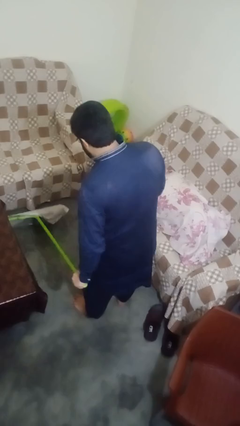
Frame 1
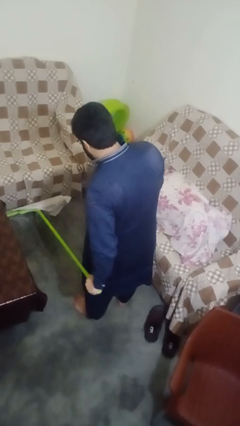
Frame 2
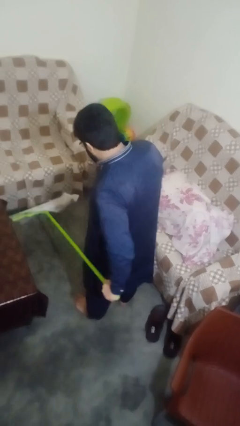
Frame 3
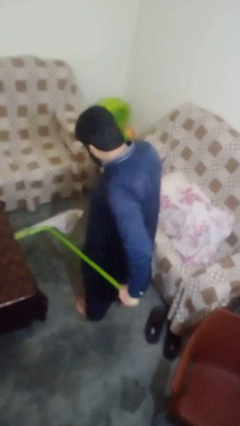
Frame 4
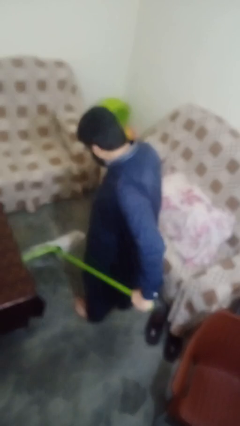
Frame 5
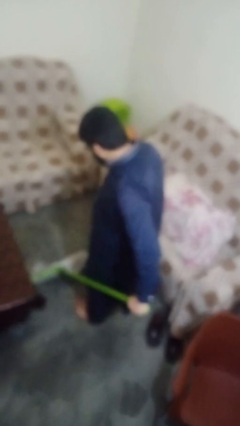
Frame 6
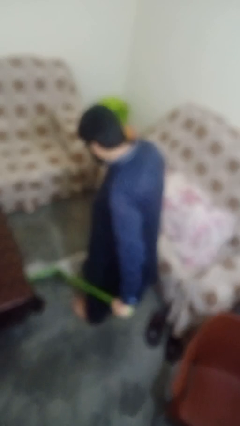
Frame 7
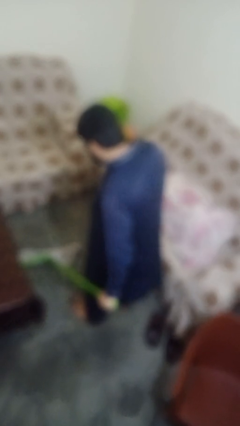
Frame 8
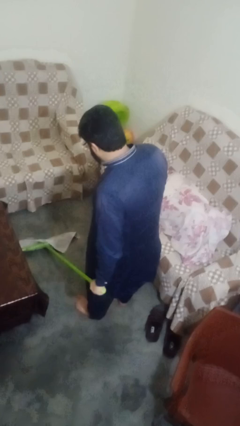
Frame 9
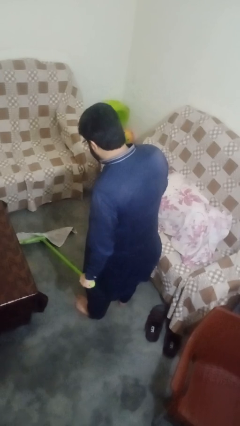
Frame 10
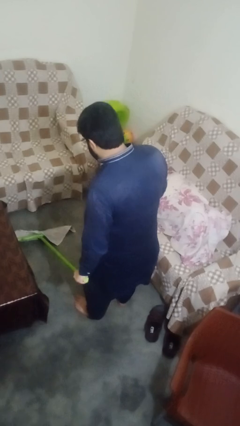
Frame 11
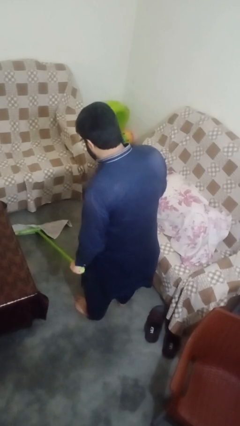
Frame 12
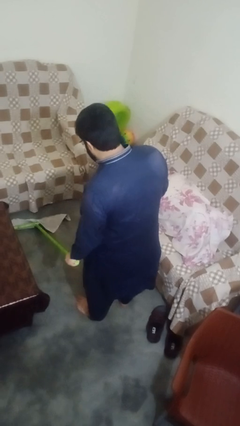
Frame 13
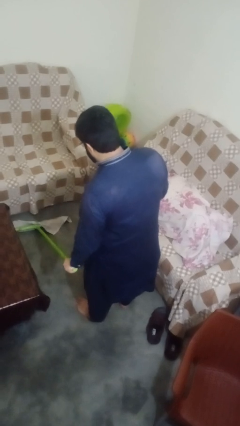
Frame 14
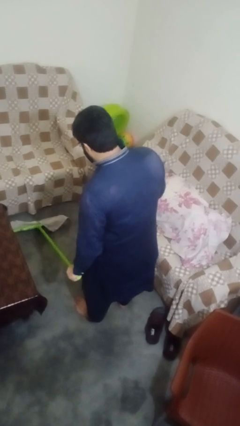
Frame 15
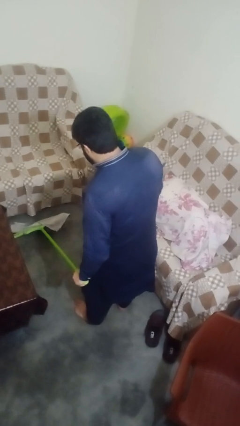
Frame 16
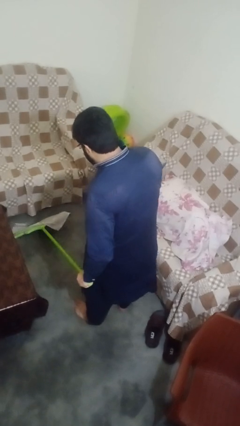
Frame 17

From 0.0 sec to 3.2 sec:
person mops

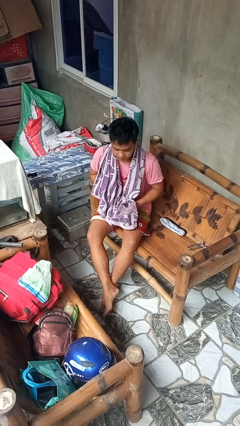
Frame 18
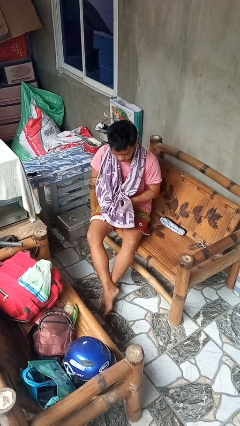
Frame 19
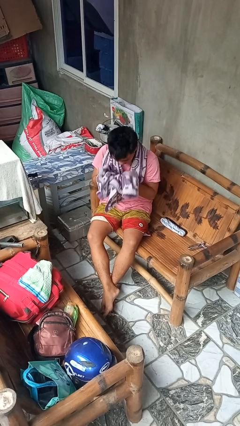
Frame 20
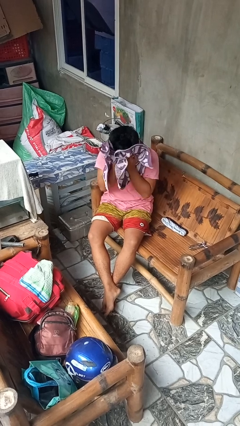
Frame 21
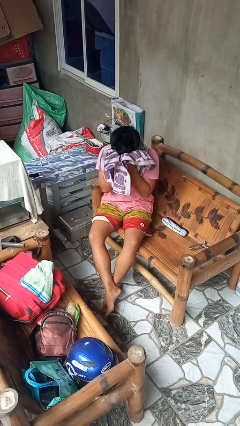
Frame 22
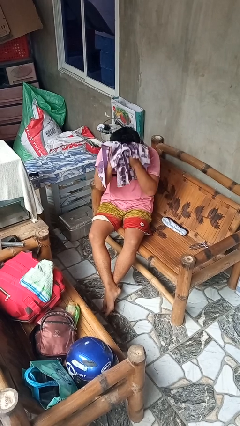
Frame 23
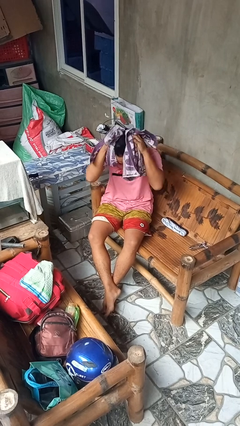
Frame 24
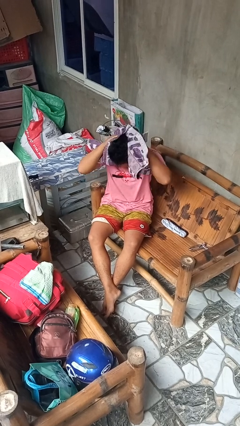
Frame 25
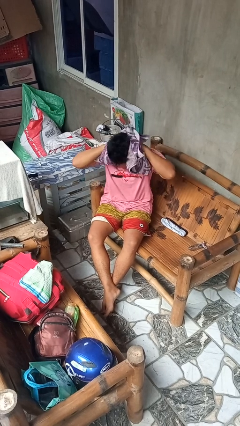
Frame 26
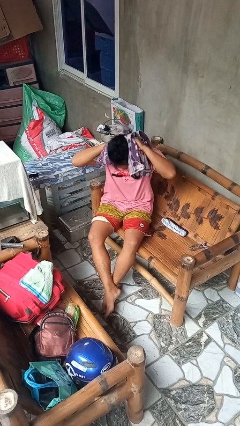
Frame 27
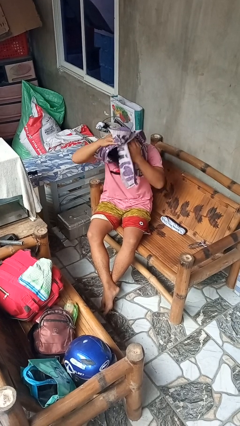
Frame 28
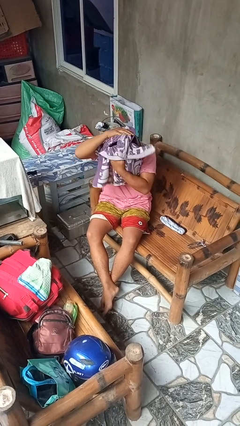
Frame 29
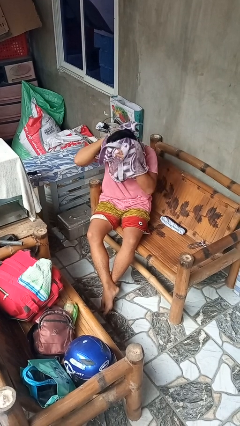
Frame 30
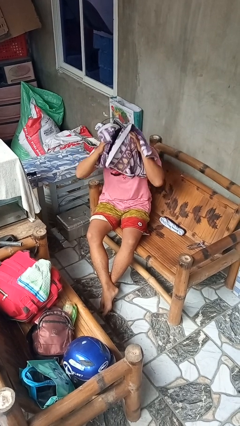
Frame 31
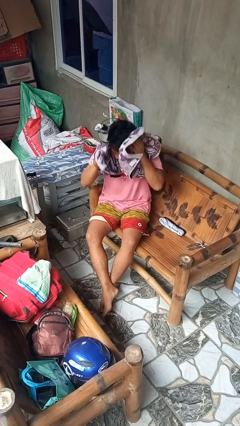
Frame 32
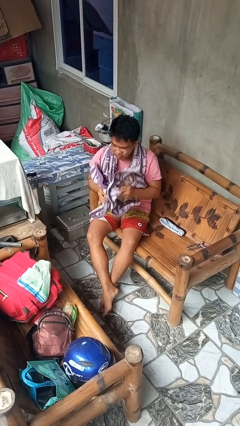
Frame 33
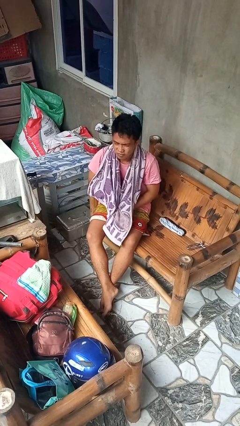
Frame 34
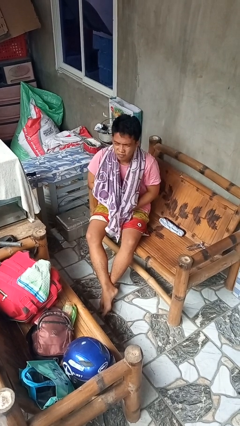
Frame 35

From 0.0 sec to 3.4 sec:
person dries hair with towel

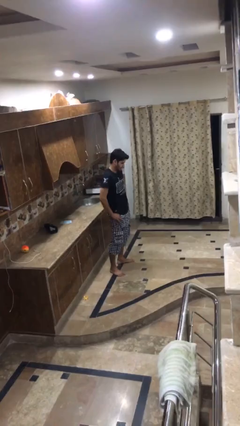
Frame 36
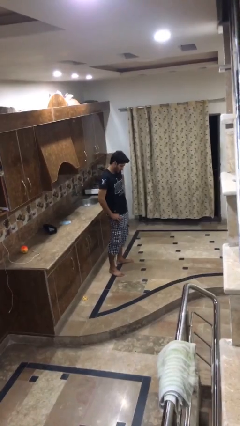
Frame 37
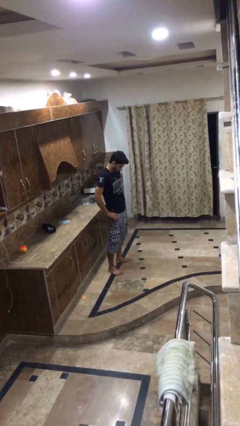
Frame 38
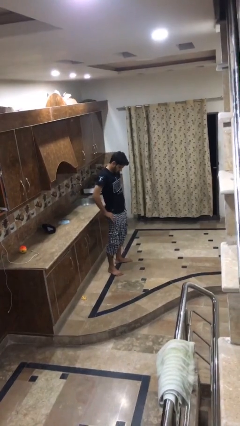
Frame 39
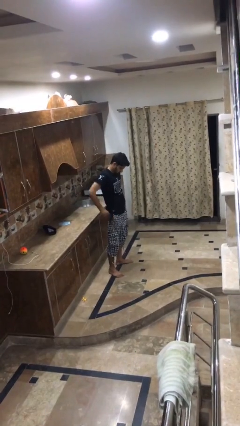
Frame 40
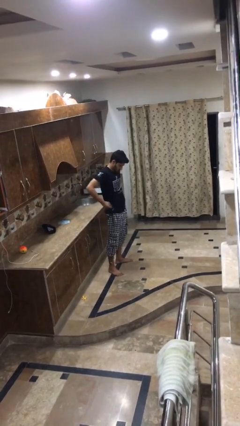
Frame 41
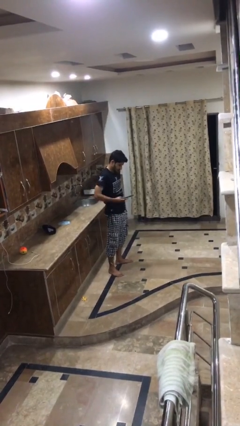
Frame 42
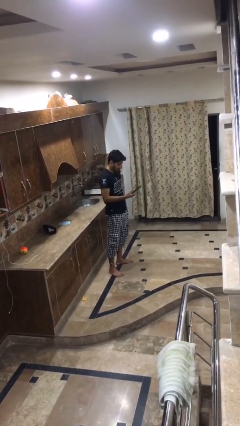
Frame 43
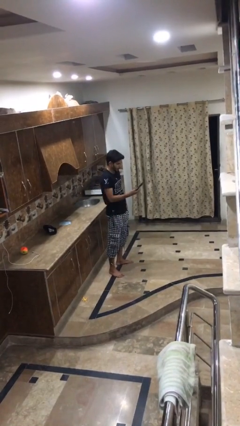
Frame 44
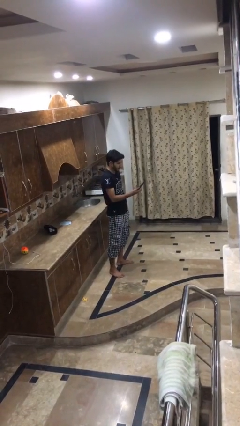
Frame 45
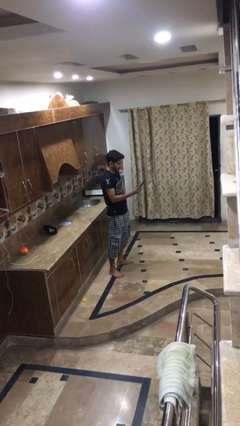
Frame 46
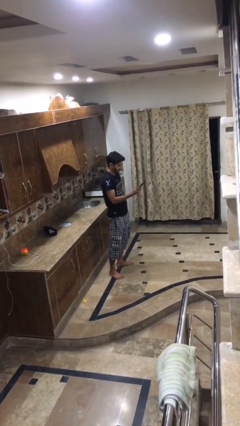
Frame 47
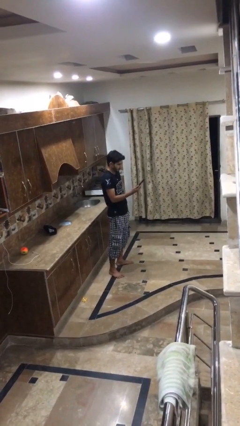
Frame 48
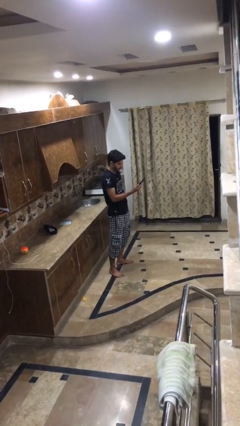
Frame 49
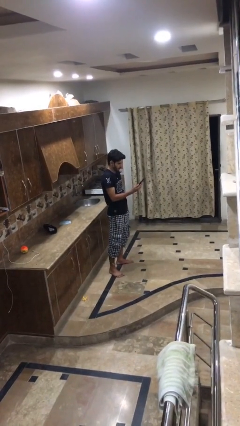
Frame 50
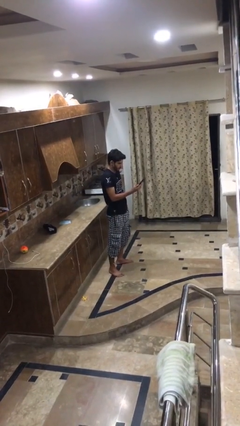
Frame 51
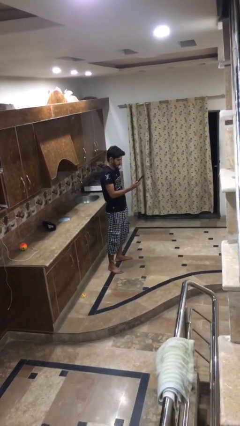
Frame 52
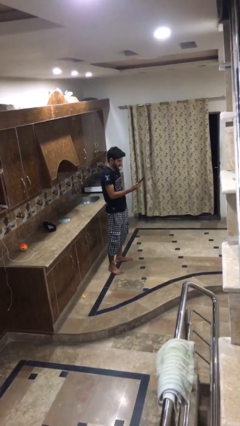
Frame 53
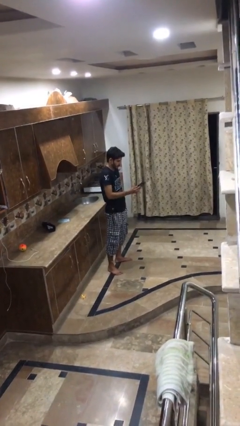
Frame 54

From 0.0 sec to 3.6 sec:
person takes phone from pocket

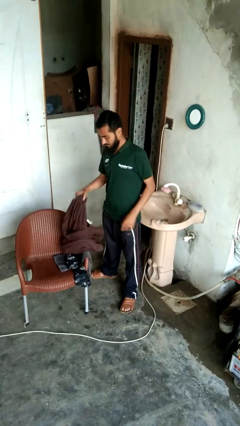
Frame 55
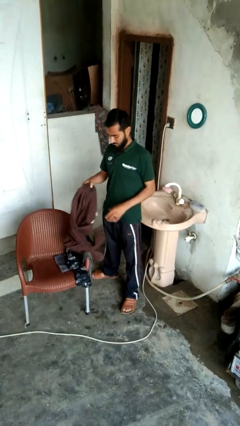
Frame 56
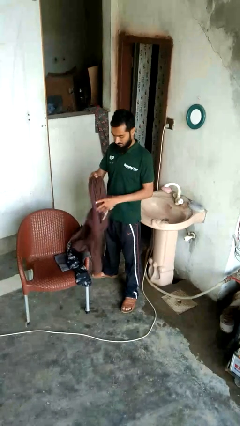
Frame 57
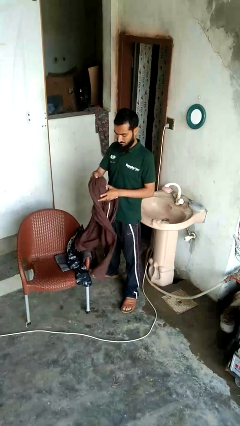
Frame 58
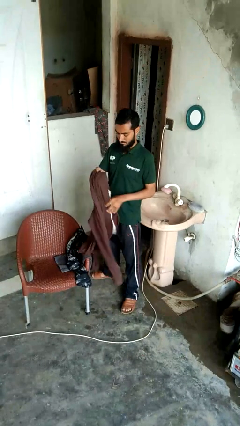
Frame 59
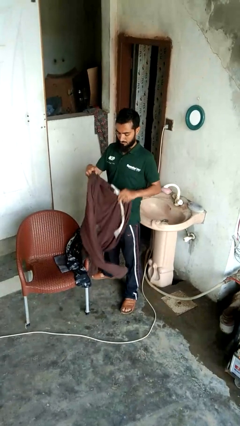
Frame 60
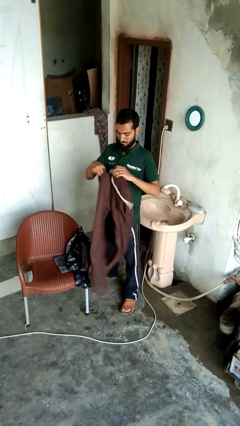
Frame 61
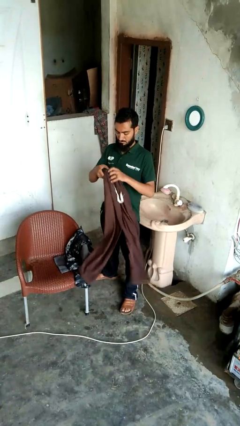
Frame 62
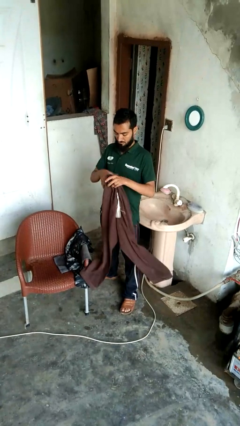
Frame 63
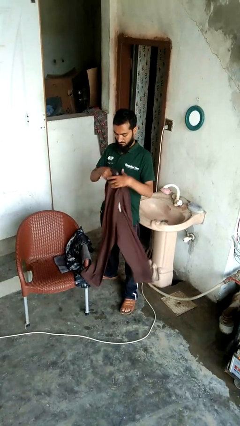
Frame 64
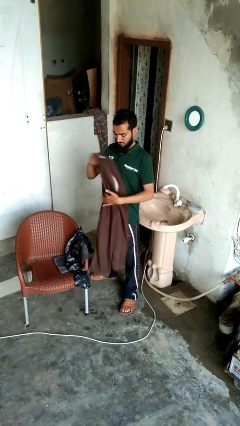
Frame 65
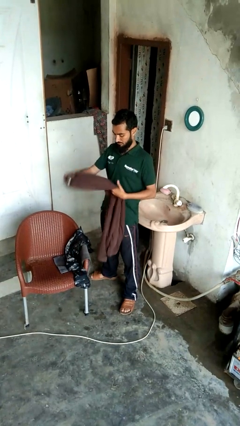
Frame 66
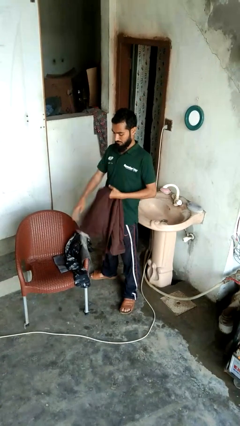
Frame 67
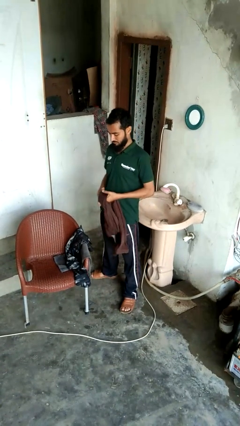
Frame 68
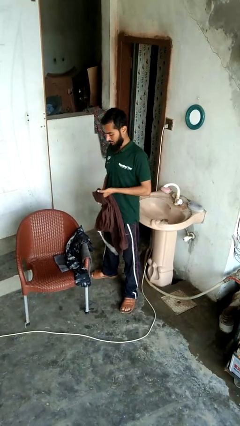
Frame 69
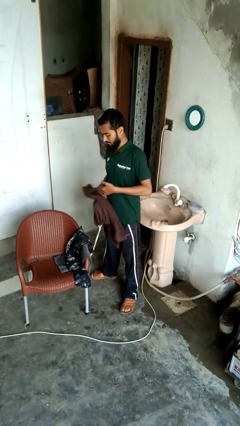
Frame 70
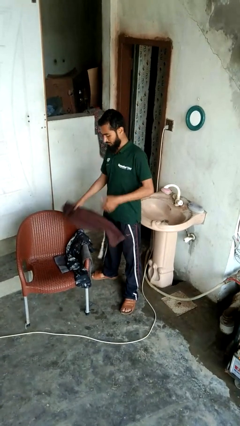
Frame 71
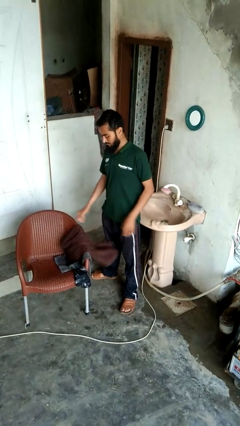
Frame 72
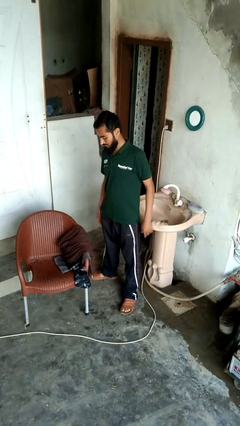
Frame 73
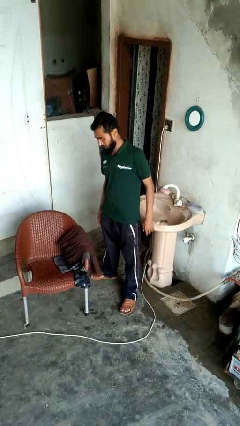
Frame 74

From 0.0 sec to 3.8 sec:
person folds pants

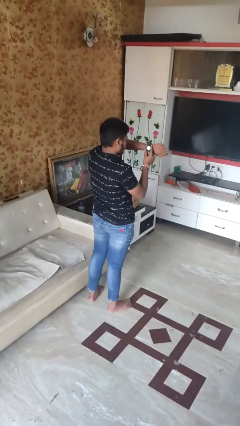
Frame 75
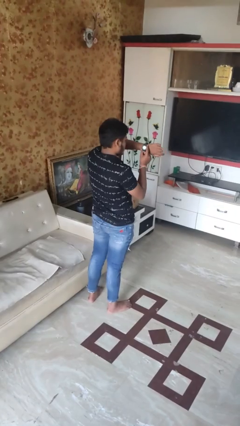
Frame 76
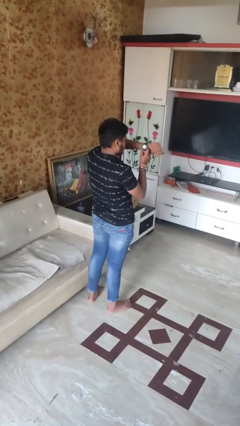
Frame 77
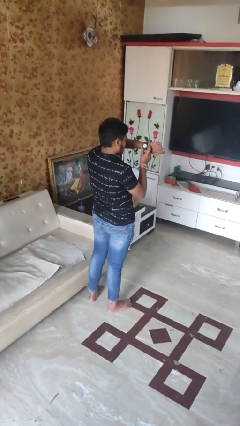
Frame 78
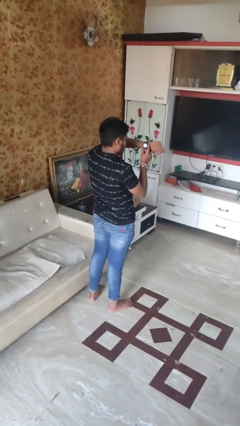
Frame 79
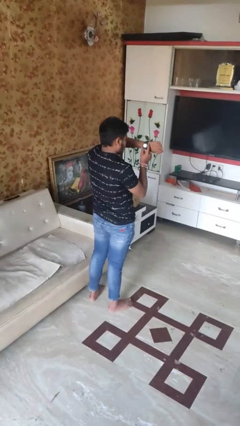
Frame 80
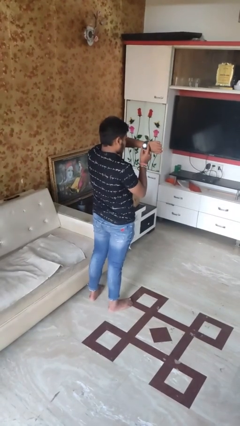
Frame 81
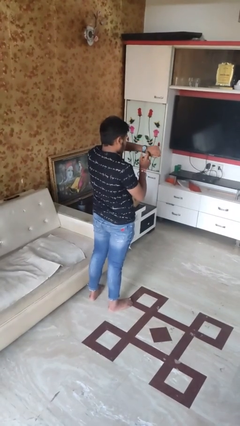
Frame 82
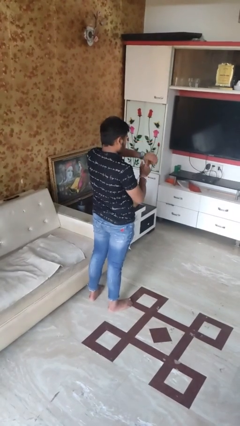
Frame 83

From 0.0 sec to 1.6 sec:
person looks at wristwatch

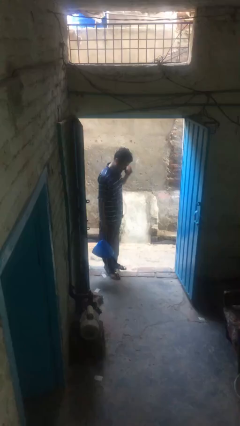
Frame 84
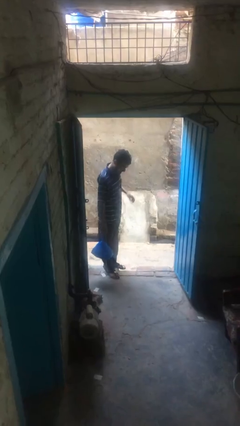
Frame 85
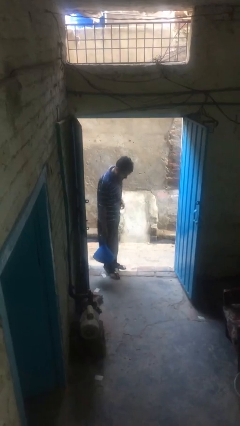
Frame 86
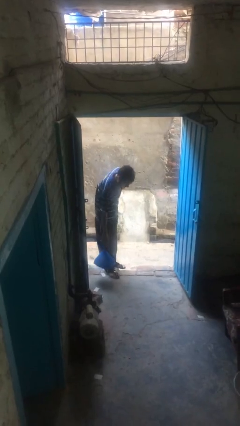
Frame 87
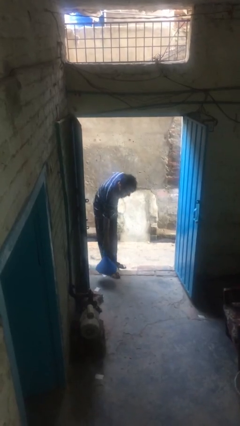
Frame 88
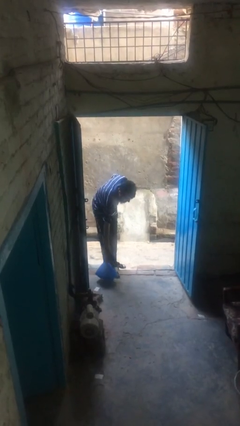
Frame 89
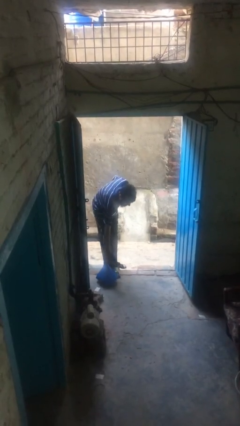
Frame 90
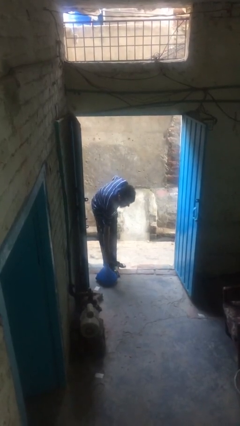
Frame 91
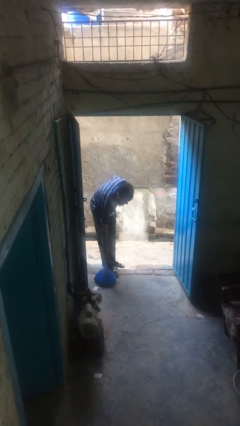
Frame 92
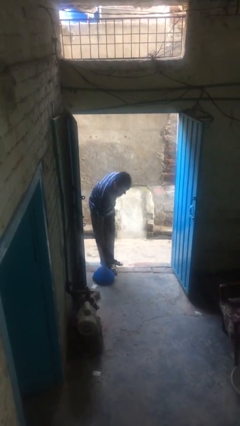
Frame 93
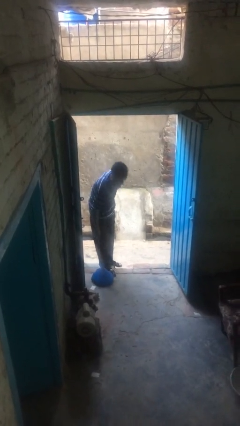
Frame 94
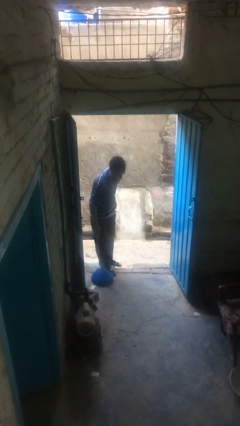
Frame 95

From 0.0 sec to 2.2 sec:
person puts down object on floor
